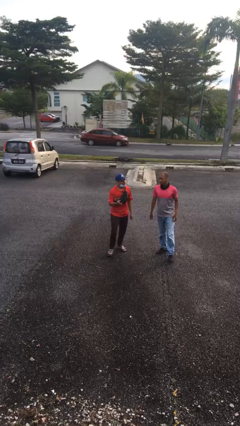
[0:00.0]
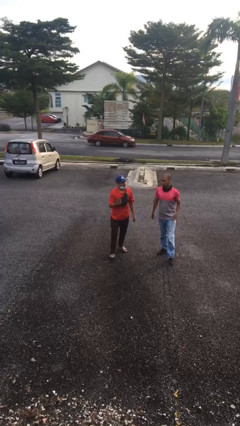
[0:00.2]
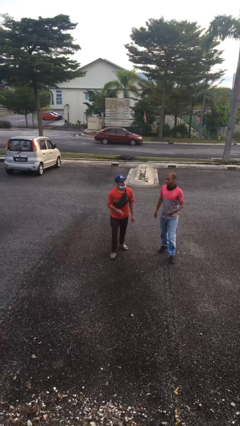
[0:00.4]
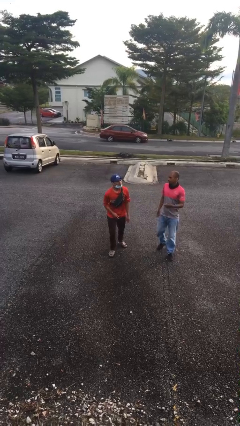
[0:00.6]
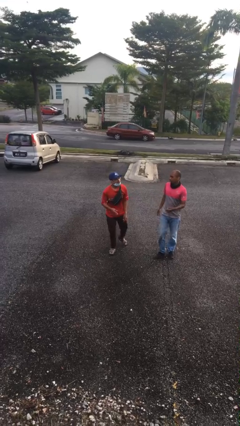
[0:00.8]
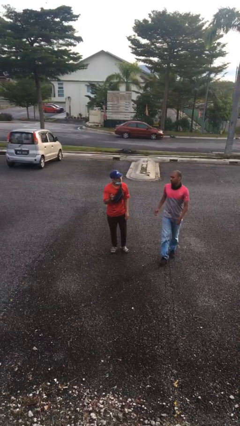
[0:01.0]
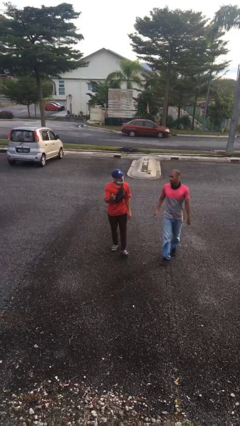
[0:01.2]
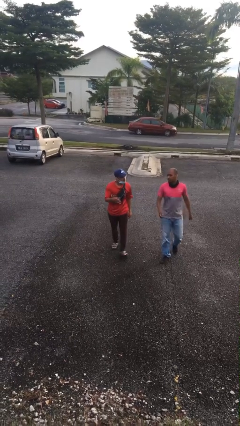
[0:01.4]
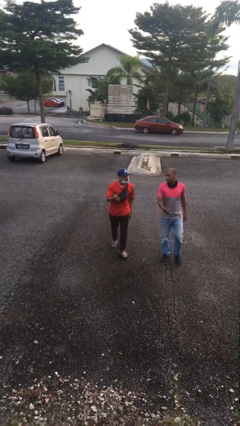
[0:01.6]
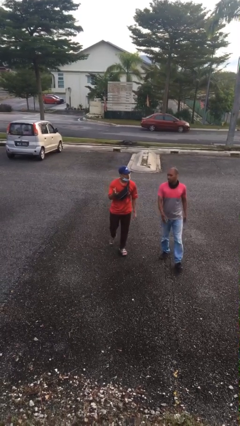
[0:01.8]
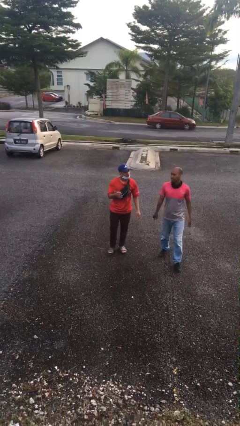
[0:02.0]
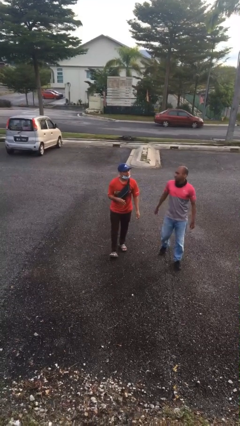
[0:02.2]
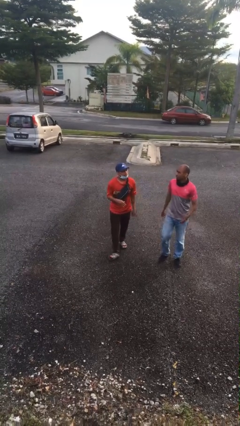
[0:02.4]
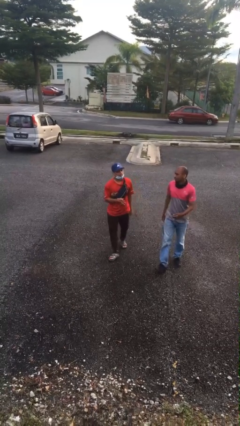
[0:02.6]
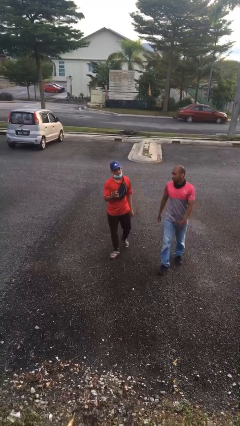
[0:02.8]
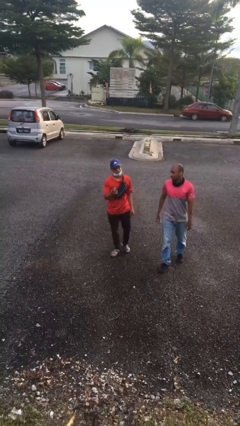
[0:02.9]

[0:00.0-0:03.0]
person talks to person

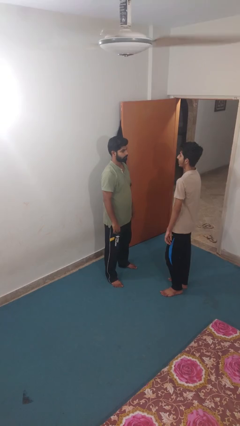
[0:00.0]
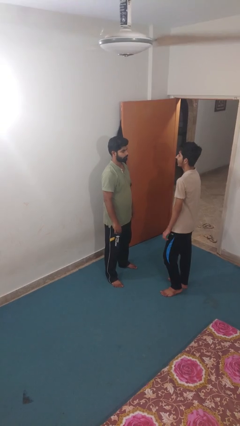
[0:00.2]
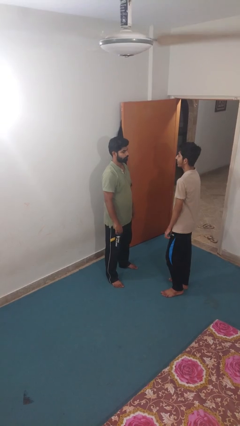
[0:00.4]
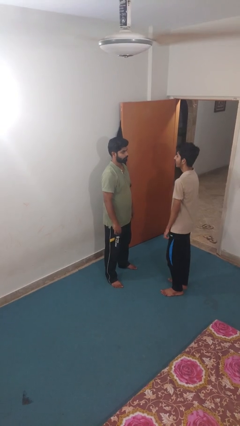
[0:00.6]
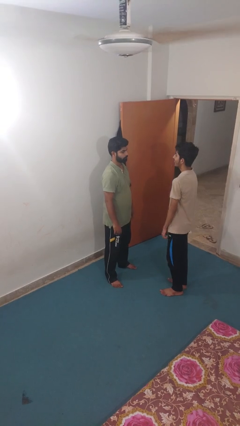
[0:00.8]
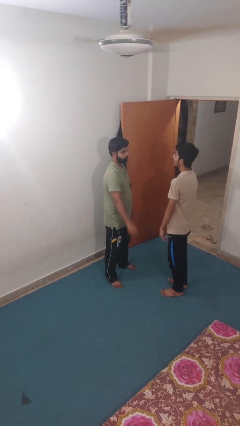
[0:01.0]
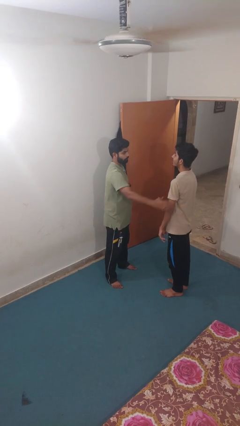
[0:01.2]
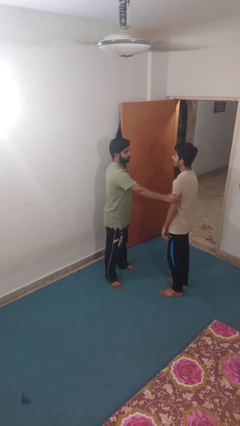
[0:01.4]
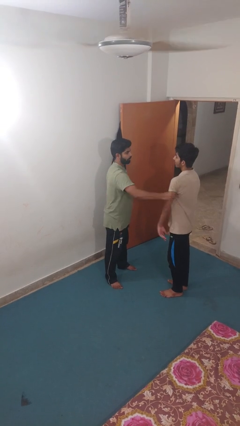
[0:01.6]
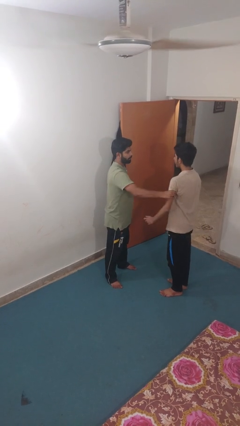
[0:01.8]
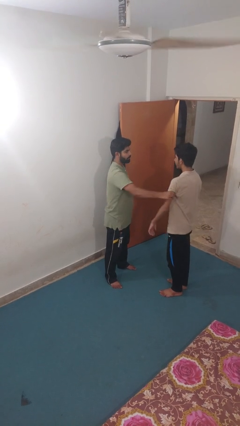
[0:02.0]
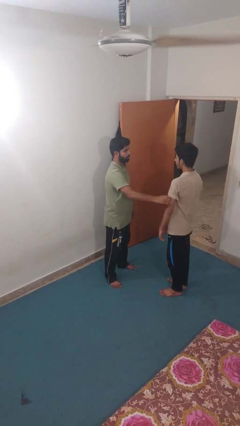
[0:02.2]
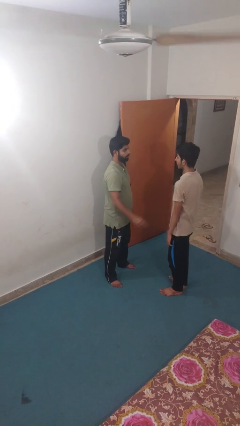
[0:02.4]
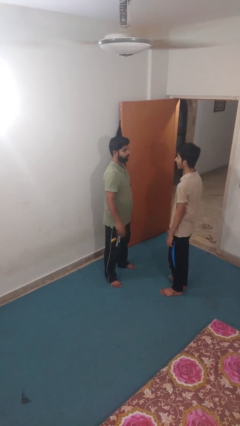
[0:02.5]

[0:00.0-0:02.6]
person grabs person by bicep

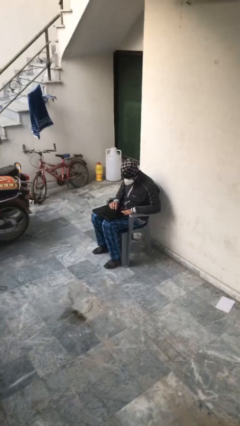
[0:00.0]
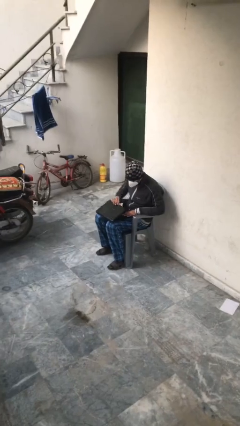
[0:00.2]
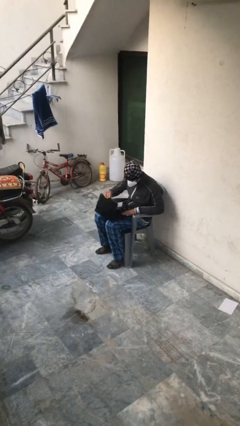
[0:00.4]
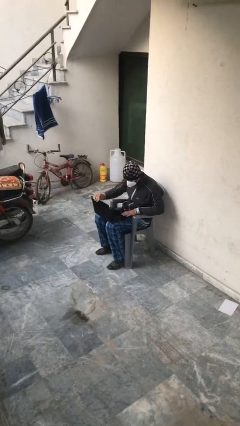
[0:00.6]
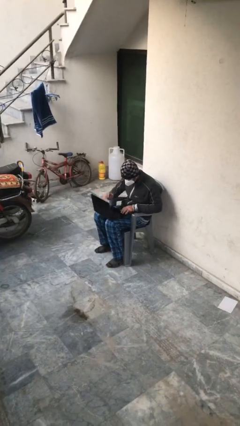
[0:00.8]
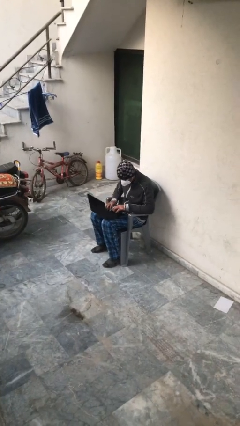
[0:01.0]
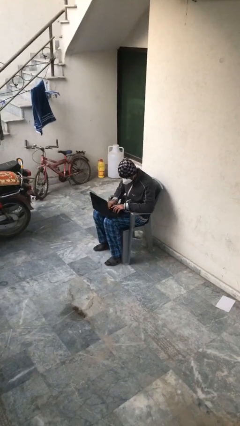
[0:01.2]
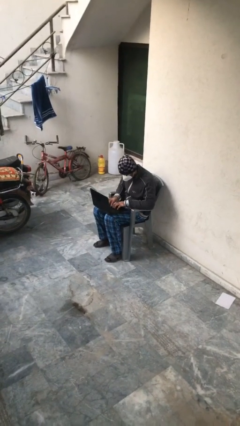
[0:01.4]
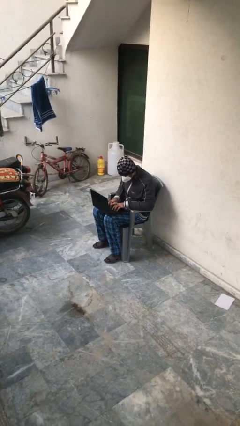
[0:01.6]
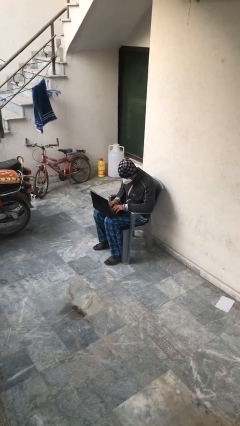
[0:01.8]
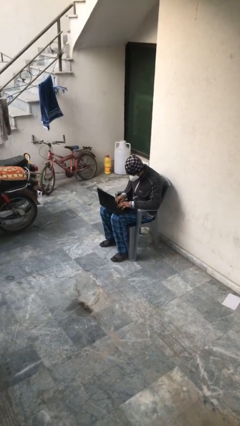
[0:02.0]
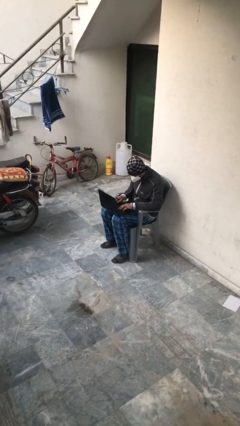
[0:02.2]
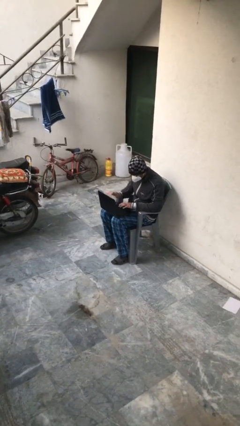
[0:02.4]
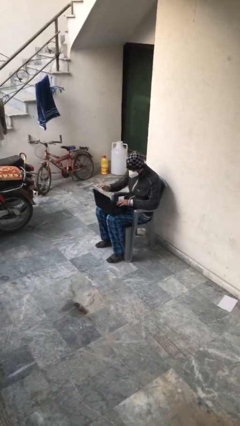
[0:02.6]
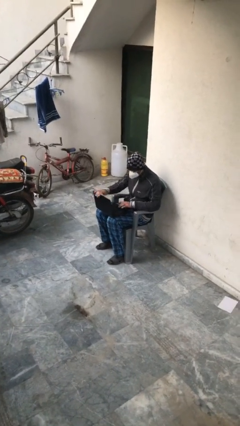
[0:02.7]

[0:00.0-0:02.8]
person interacts with laptop

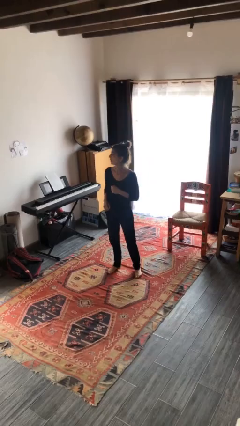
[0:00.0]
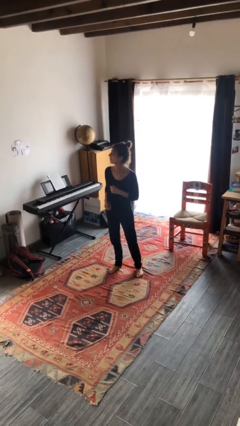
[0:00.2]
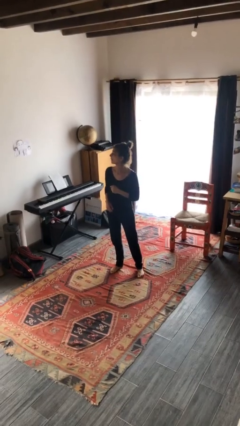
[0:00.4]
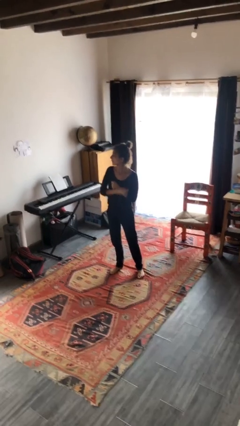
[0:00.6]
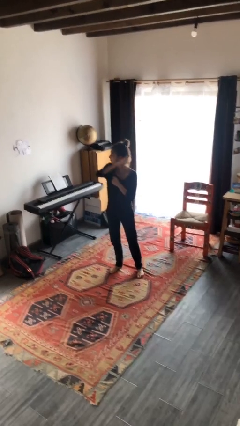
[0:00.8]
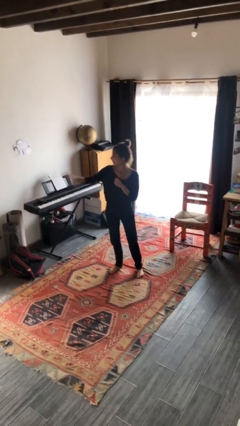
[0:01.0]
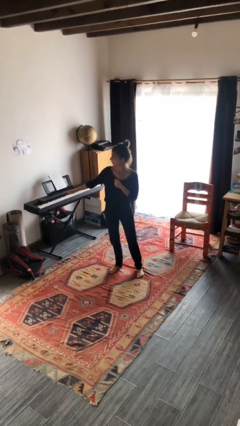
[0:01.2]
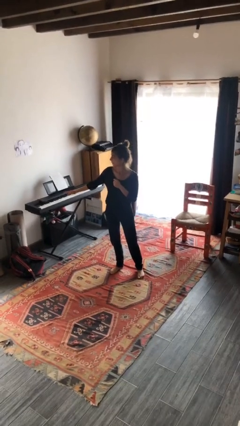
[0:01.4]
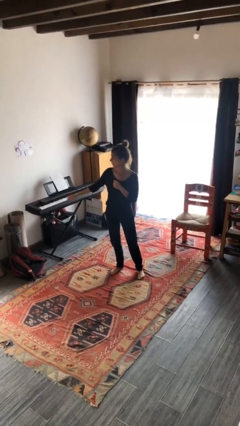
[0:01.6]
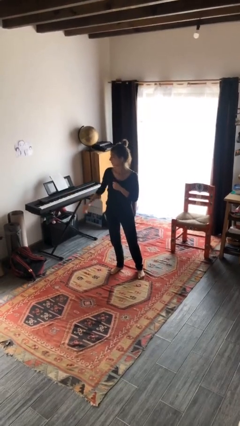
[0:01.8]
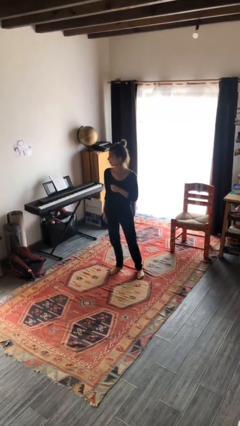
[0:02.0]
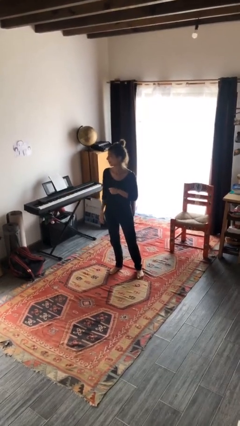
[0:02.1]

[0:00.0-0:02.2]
person karate chop

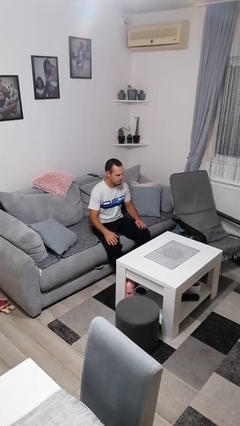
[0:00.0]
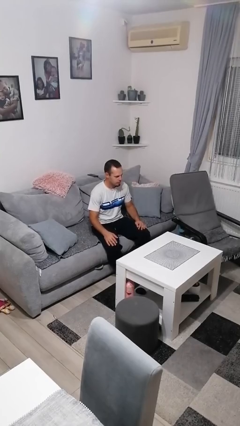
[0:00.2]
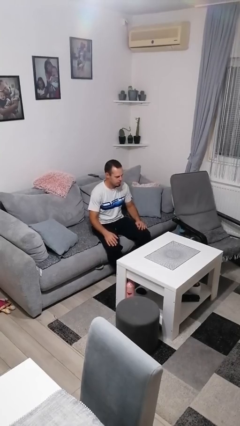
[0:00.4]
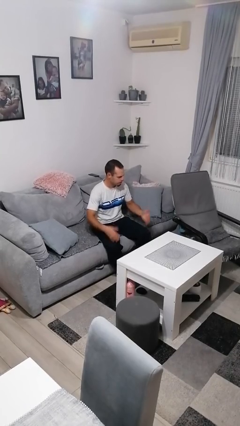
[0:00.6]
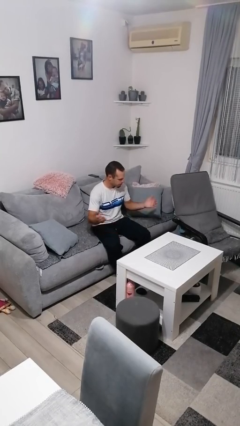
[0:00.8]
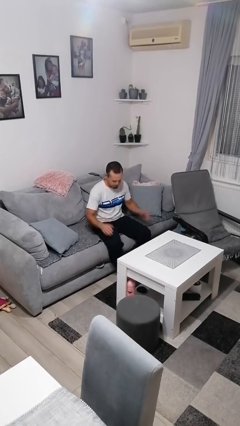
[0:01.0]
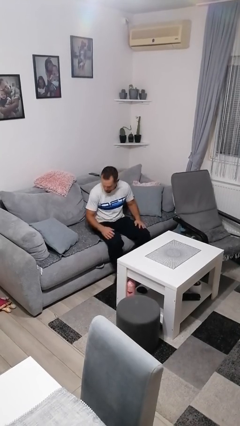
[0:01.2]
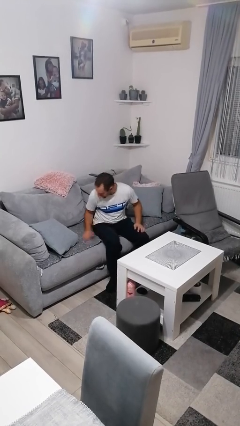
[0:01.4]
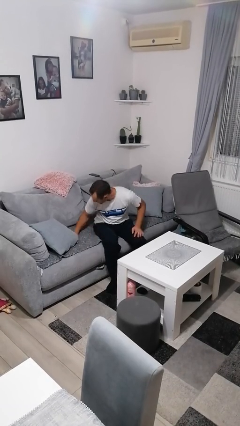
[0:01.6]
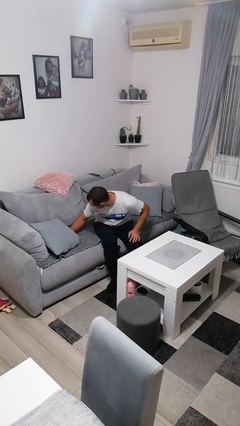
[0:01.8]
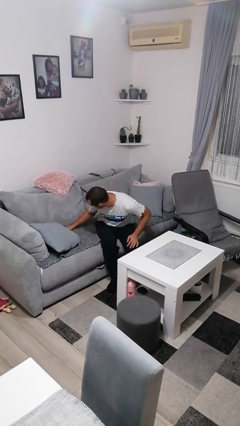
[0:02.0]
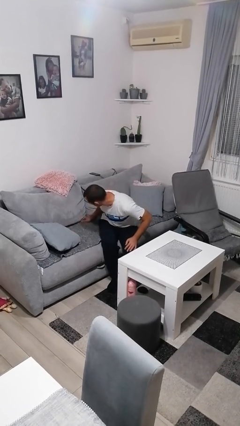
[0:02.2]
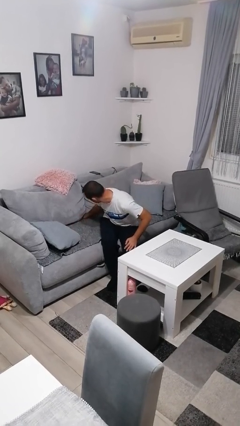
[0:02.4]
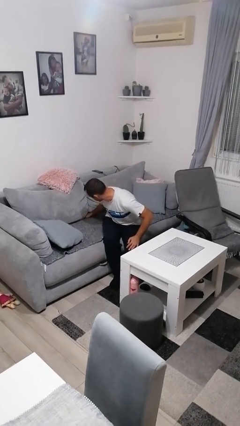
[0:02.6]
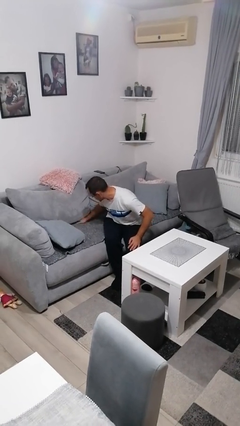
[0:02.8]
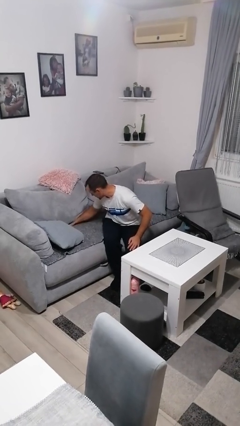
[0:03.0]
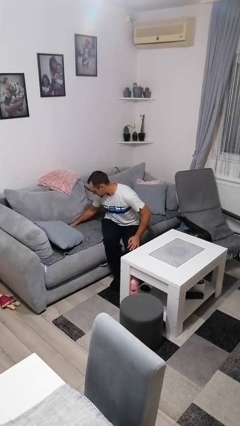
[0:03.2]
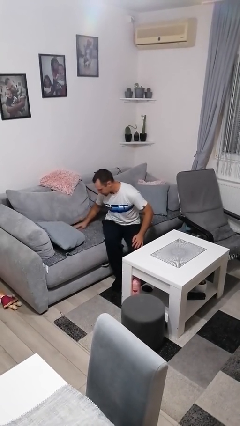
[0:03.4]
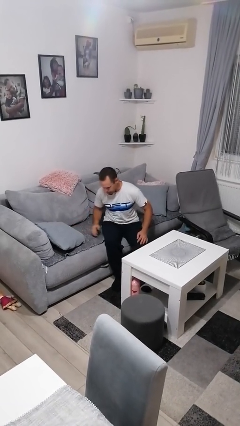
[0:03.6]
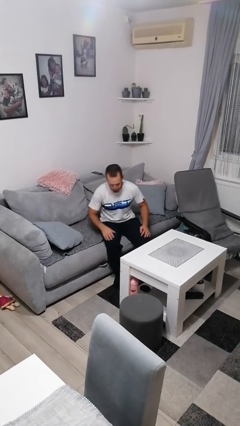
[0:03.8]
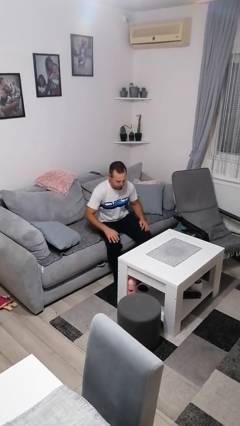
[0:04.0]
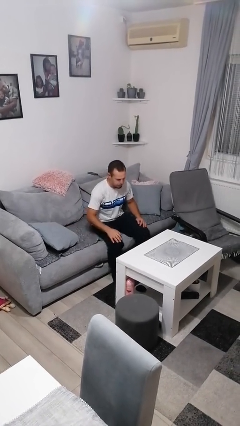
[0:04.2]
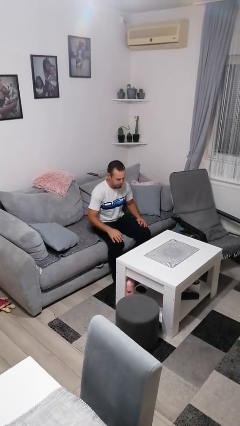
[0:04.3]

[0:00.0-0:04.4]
person searches in couch

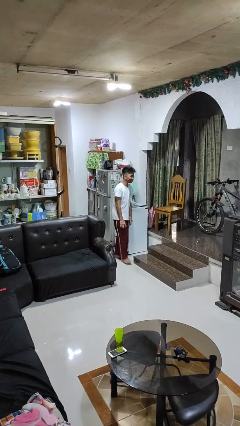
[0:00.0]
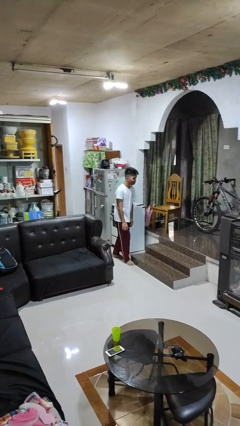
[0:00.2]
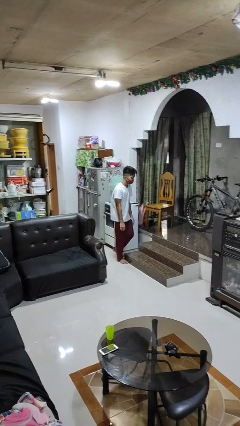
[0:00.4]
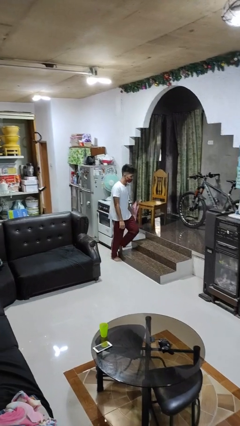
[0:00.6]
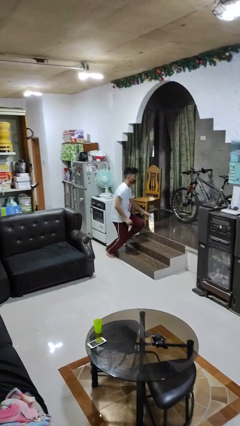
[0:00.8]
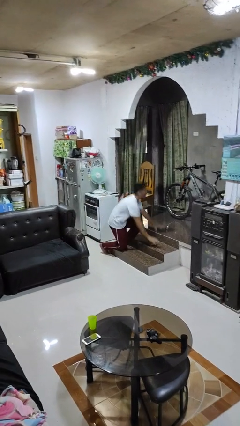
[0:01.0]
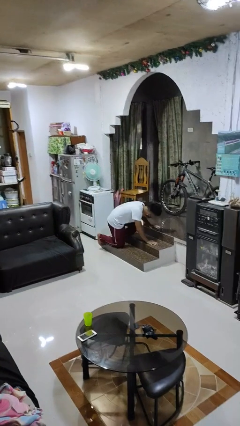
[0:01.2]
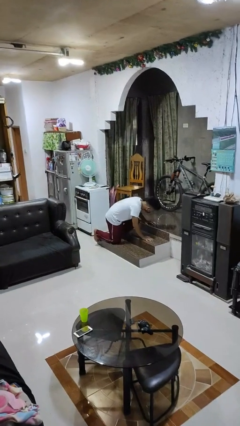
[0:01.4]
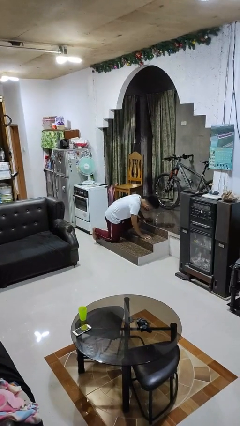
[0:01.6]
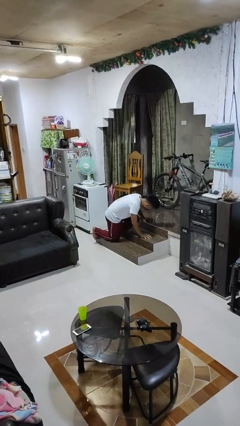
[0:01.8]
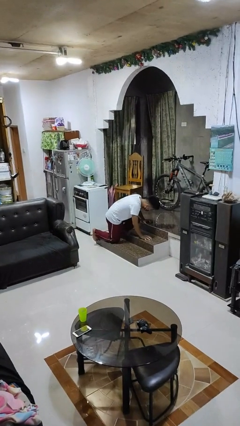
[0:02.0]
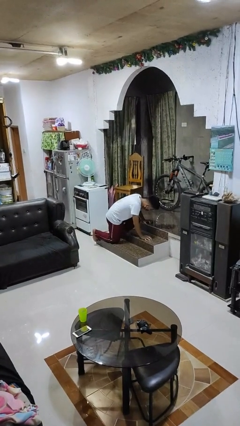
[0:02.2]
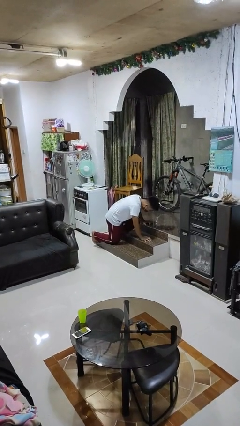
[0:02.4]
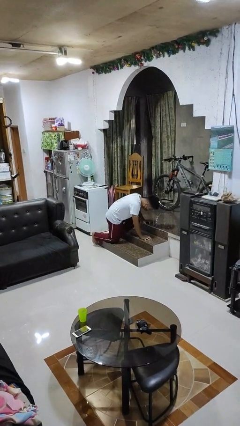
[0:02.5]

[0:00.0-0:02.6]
person trips on object on floor
